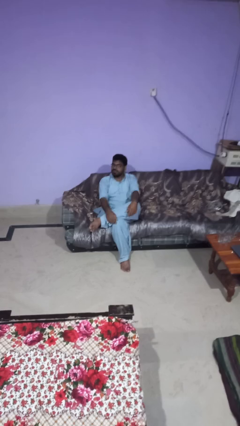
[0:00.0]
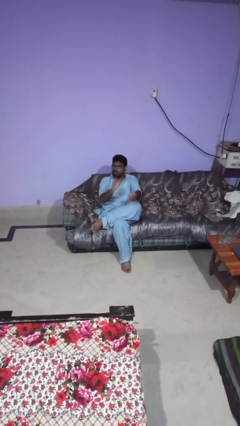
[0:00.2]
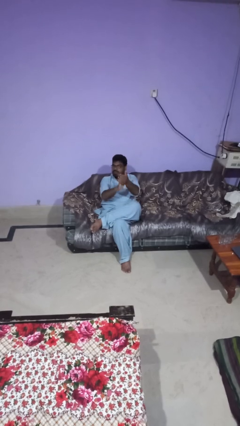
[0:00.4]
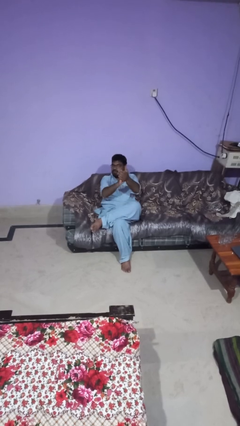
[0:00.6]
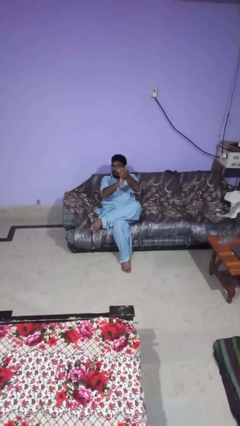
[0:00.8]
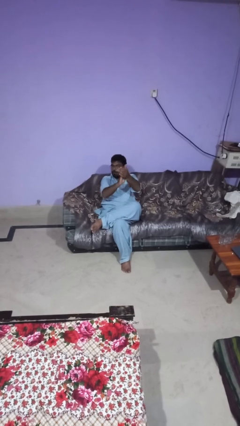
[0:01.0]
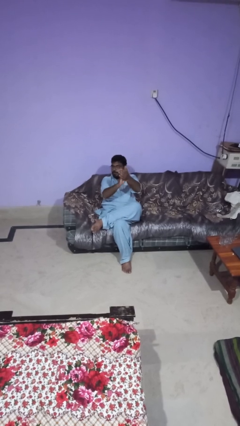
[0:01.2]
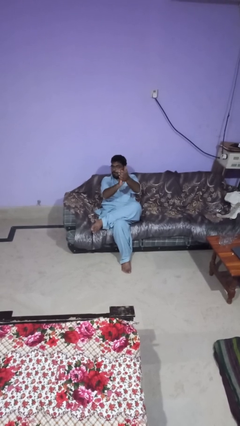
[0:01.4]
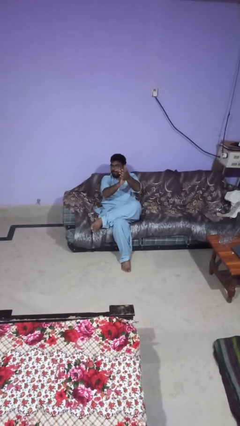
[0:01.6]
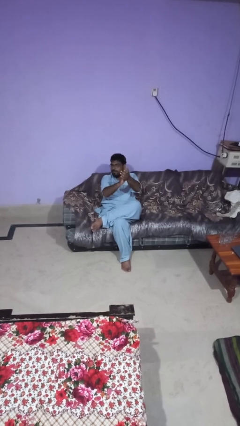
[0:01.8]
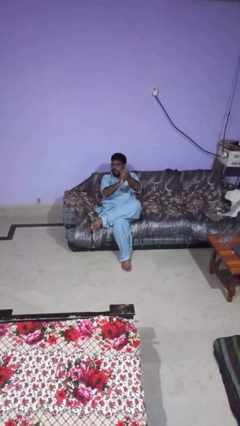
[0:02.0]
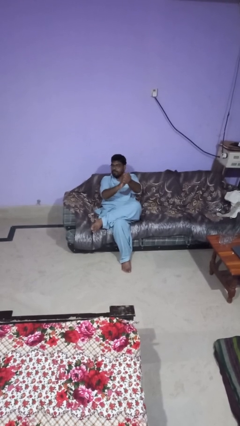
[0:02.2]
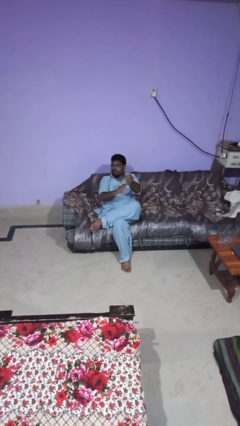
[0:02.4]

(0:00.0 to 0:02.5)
person claps hands

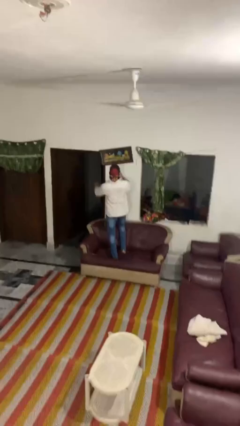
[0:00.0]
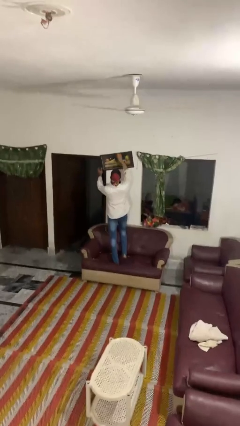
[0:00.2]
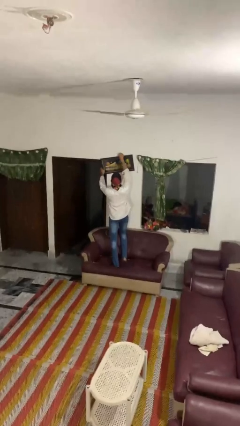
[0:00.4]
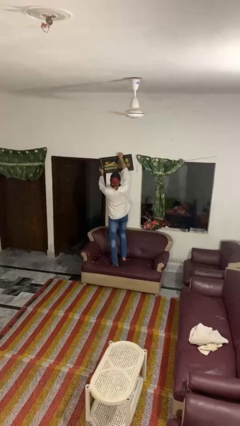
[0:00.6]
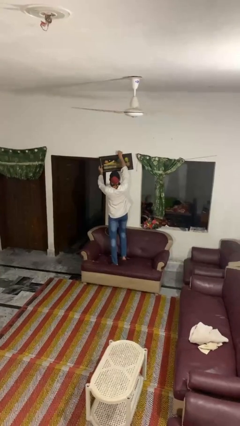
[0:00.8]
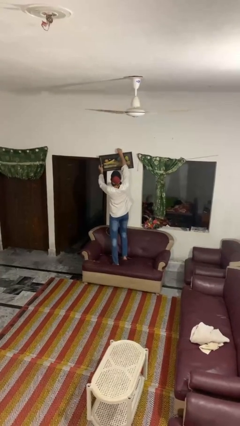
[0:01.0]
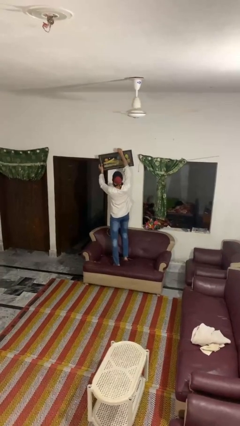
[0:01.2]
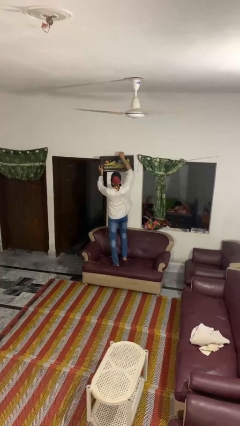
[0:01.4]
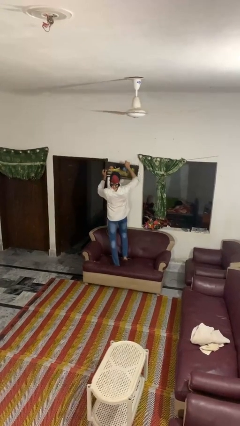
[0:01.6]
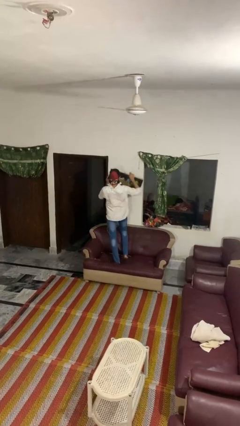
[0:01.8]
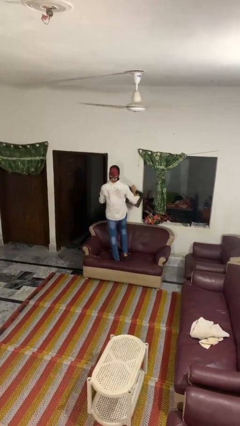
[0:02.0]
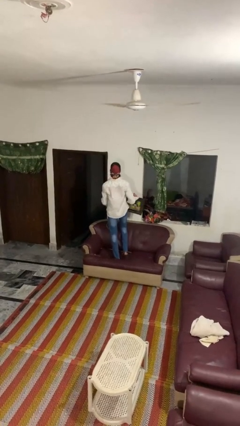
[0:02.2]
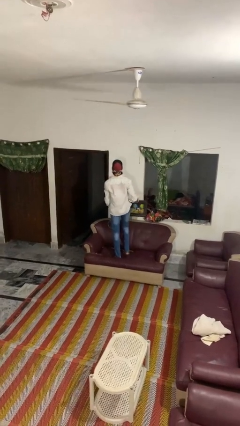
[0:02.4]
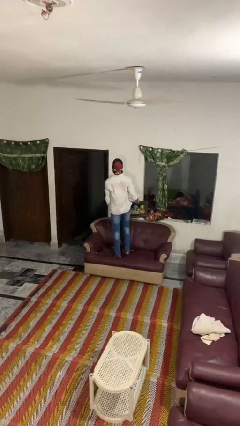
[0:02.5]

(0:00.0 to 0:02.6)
person takes down picture frame

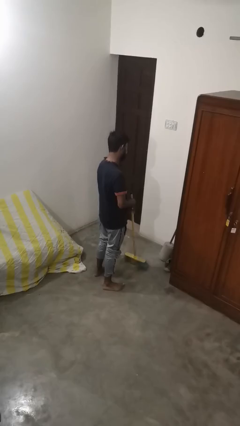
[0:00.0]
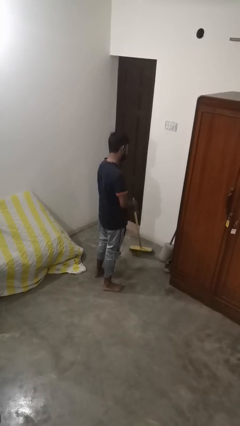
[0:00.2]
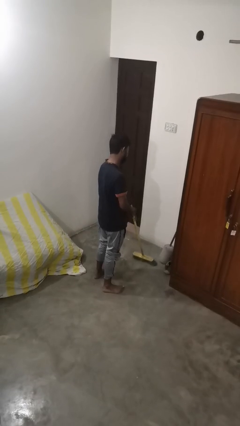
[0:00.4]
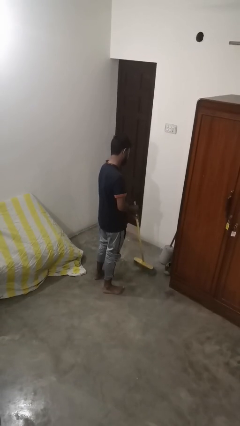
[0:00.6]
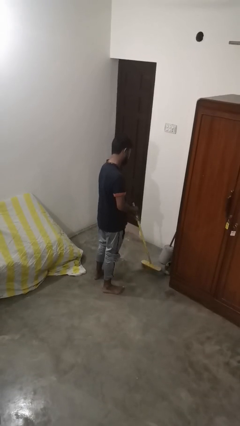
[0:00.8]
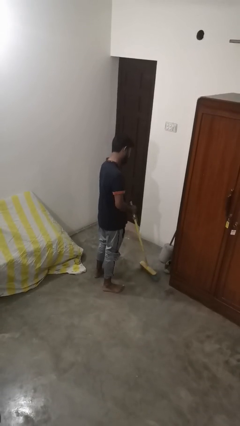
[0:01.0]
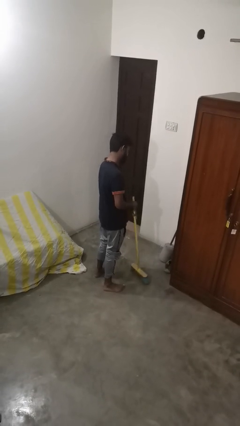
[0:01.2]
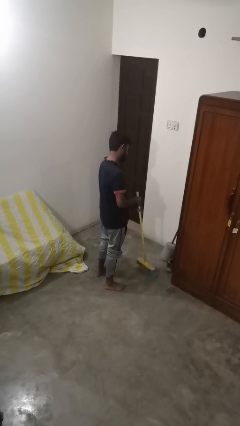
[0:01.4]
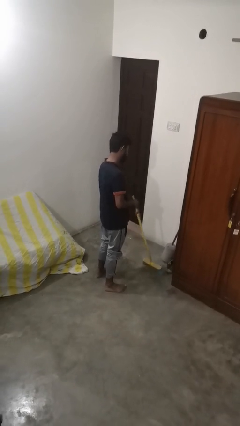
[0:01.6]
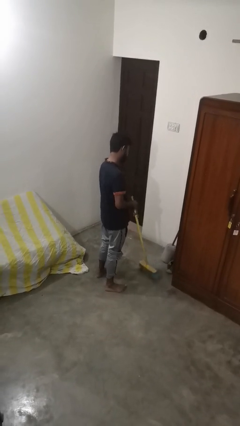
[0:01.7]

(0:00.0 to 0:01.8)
person sweeps floor

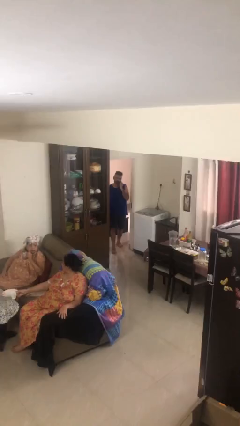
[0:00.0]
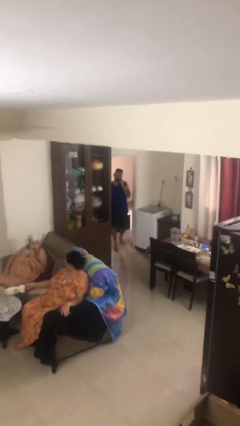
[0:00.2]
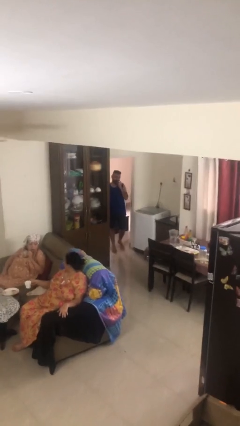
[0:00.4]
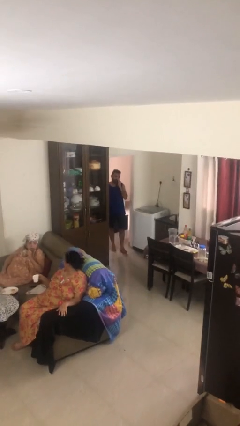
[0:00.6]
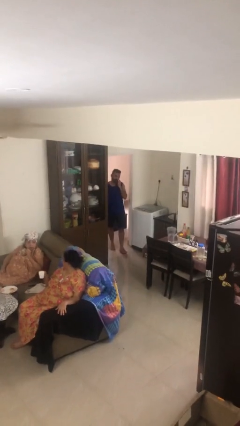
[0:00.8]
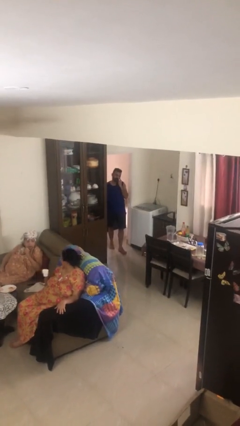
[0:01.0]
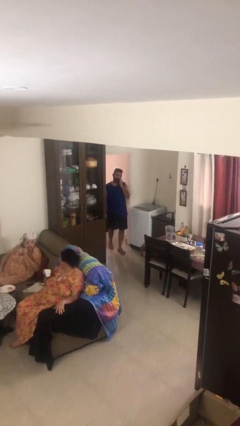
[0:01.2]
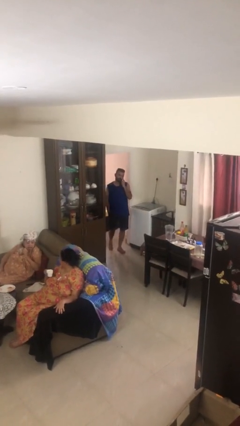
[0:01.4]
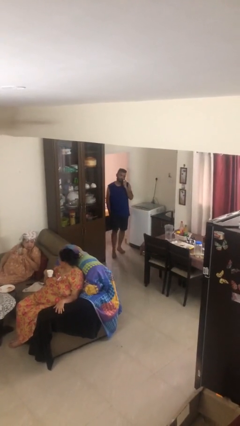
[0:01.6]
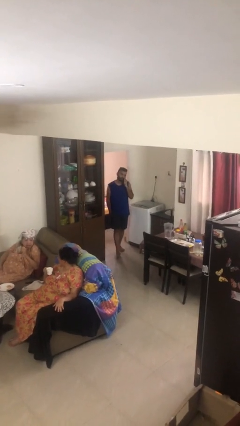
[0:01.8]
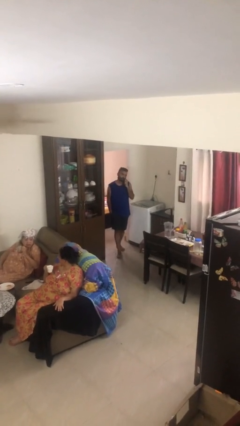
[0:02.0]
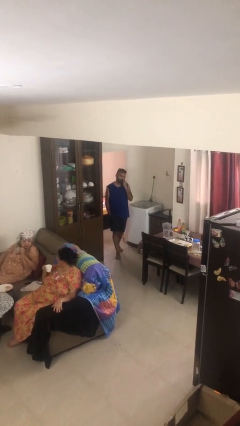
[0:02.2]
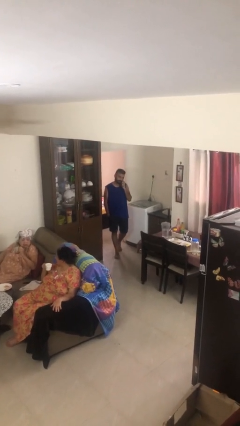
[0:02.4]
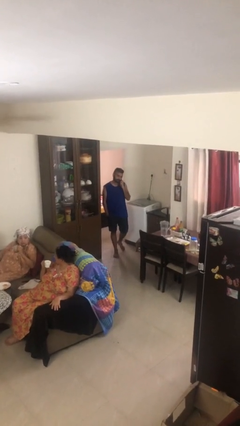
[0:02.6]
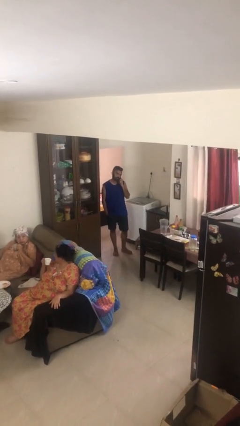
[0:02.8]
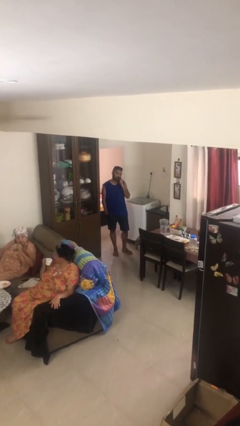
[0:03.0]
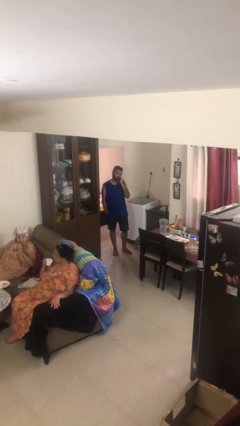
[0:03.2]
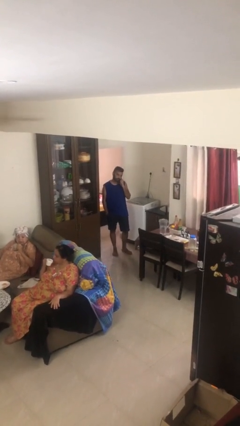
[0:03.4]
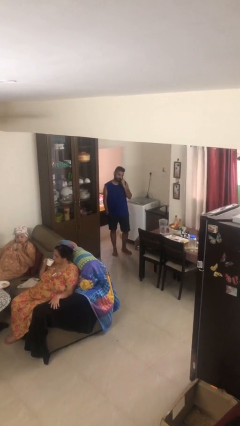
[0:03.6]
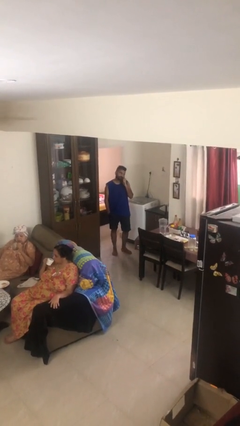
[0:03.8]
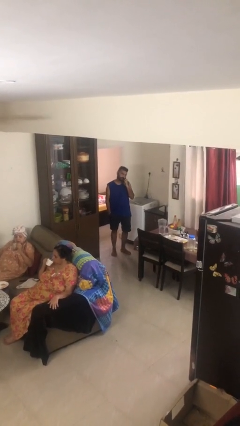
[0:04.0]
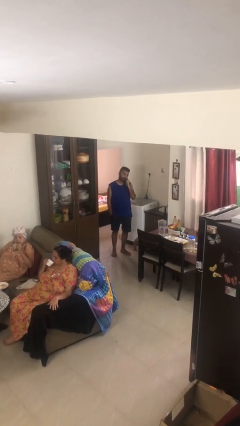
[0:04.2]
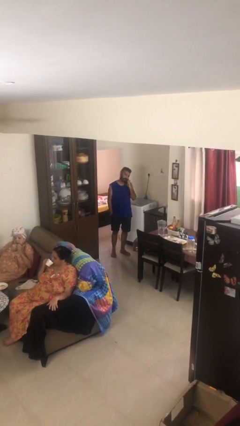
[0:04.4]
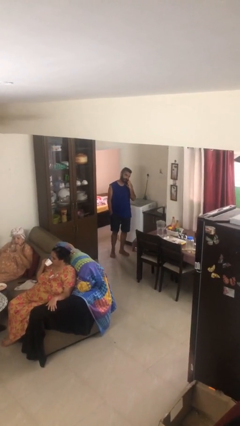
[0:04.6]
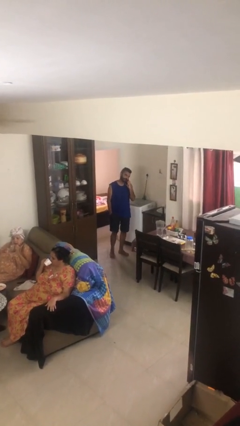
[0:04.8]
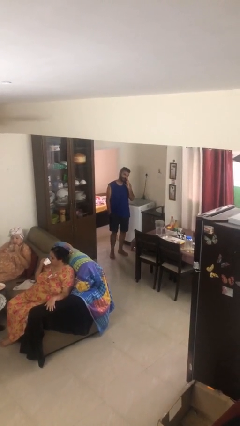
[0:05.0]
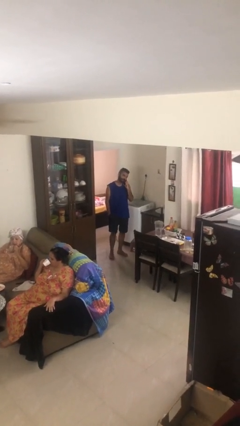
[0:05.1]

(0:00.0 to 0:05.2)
person enters scene through structure

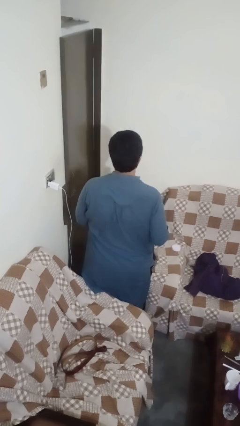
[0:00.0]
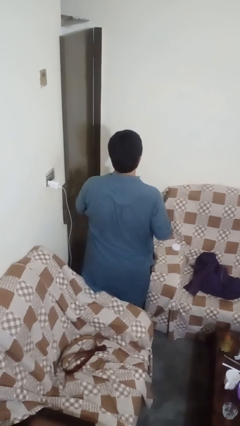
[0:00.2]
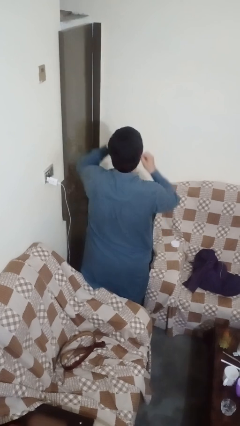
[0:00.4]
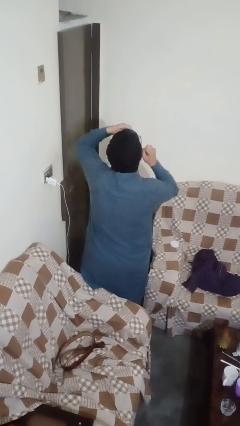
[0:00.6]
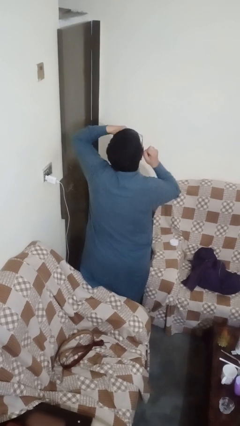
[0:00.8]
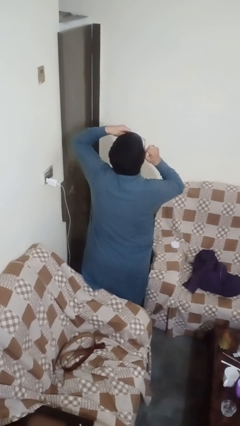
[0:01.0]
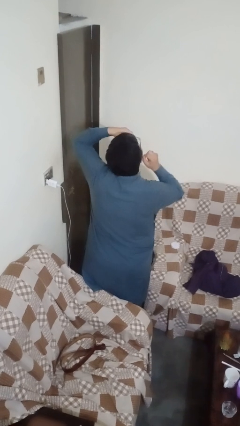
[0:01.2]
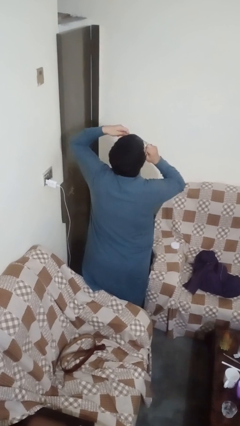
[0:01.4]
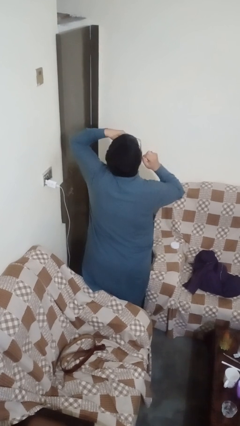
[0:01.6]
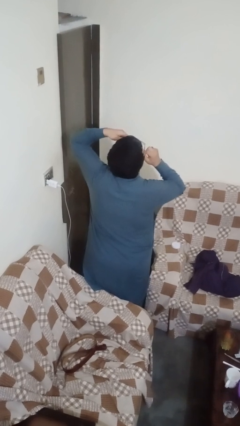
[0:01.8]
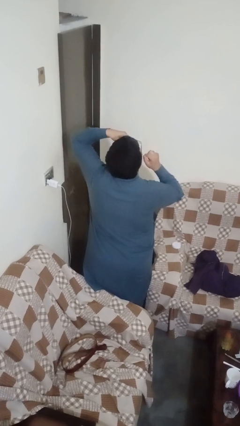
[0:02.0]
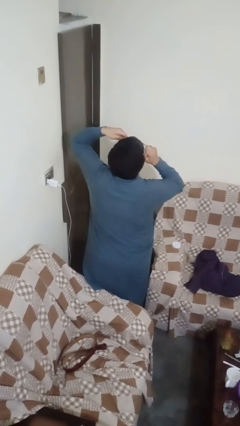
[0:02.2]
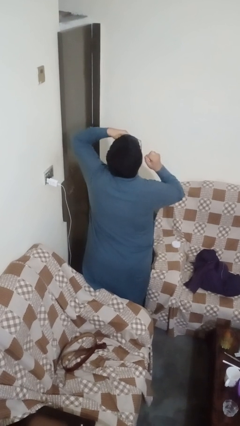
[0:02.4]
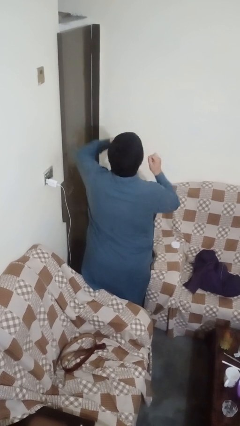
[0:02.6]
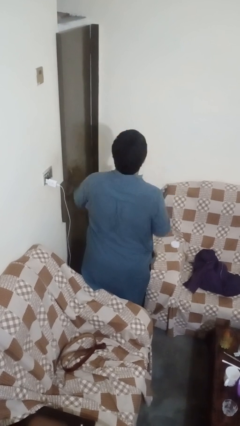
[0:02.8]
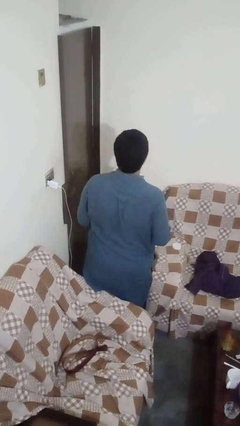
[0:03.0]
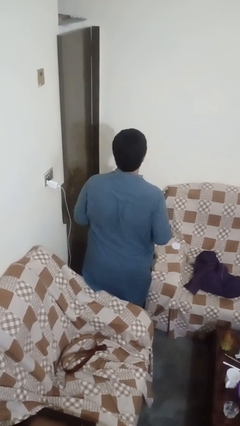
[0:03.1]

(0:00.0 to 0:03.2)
person flosses

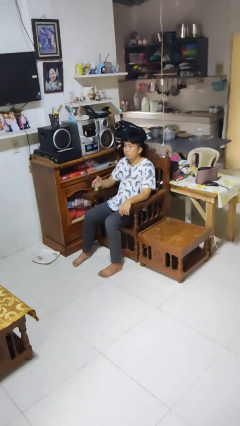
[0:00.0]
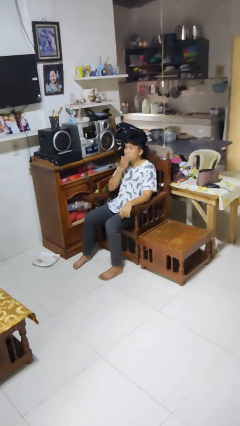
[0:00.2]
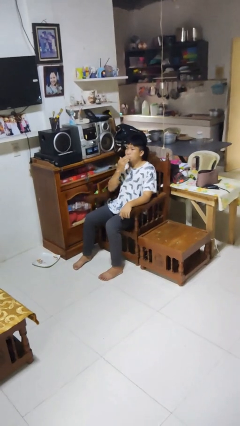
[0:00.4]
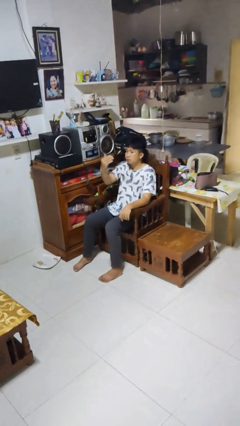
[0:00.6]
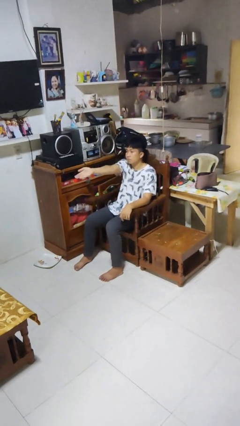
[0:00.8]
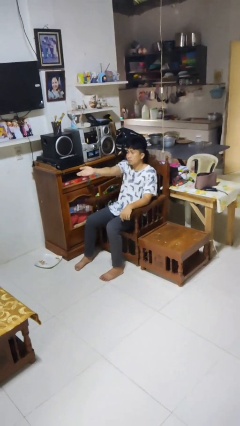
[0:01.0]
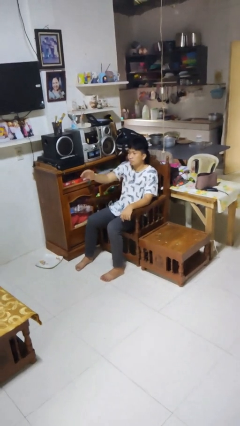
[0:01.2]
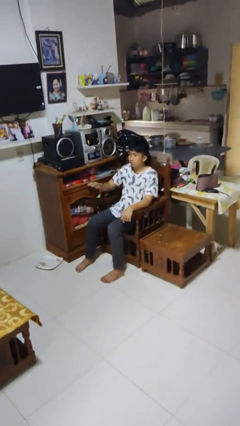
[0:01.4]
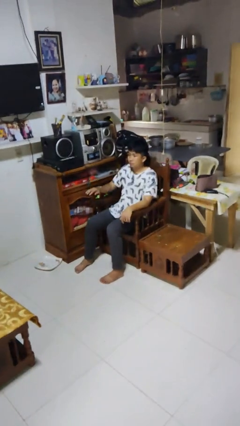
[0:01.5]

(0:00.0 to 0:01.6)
person gestures blow kiss

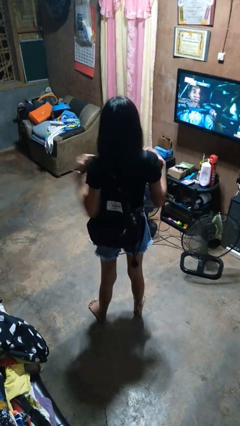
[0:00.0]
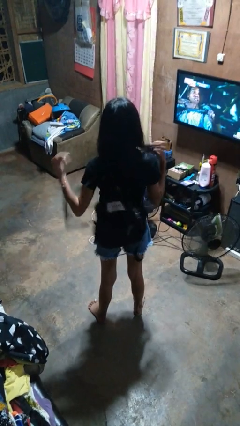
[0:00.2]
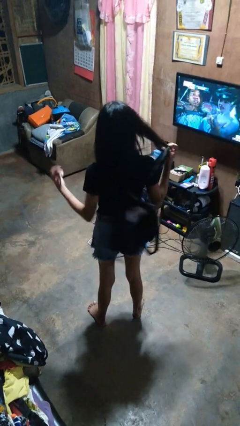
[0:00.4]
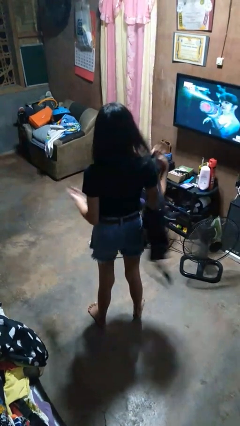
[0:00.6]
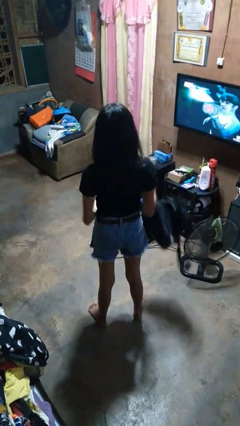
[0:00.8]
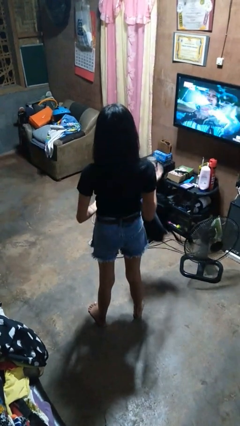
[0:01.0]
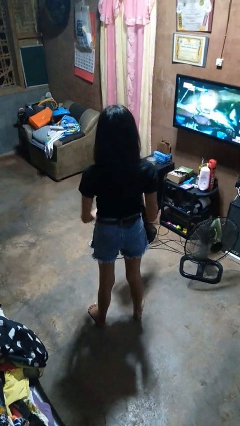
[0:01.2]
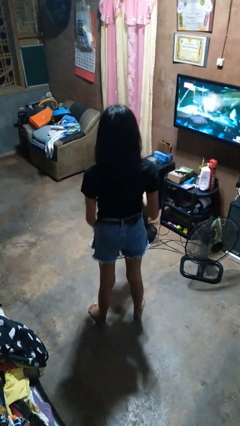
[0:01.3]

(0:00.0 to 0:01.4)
person takes off backpack
